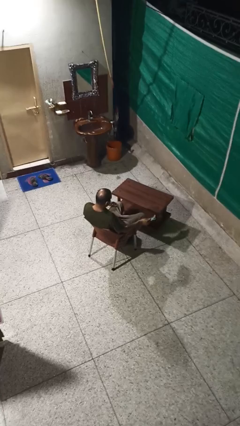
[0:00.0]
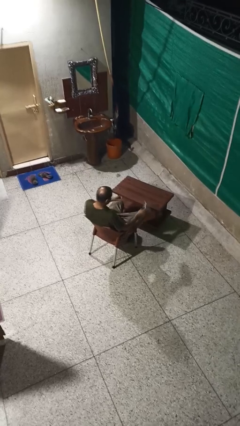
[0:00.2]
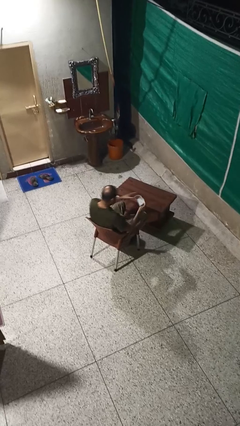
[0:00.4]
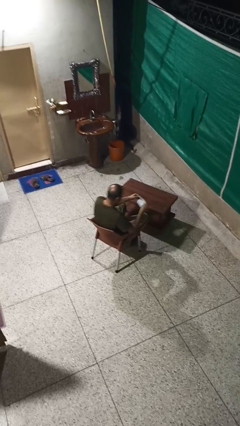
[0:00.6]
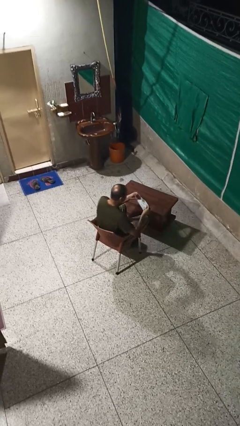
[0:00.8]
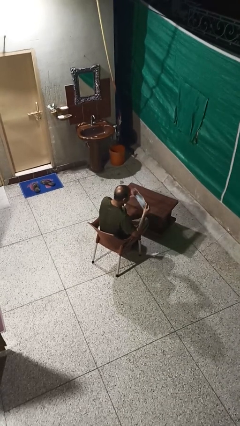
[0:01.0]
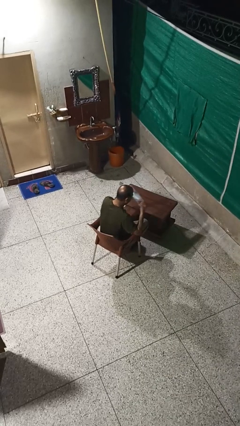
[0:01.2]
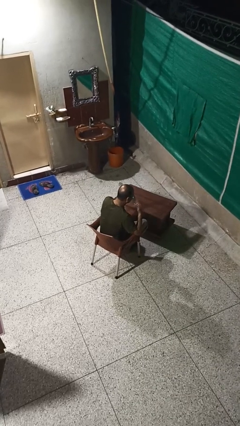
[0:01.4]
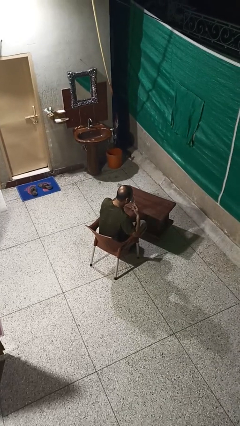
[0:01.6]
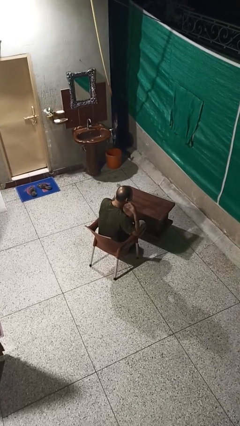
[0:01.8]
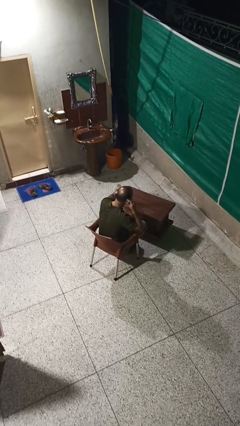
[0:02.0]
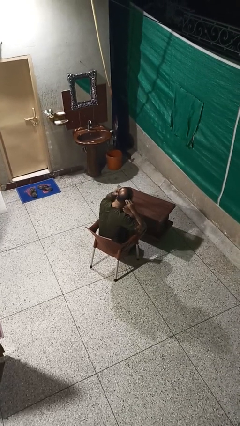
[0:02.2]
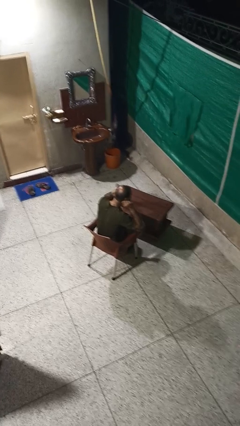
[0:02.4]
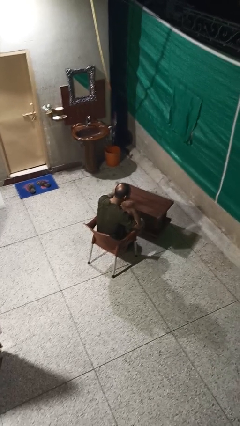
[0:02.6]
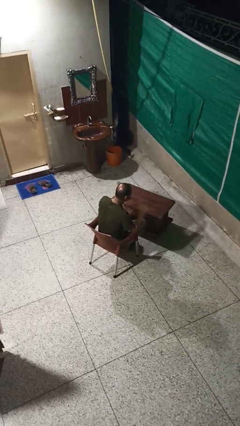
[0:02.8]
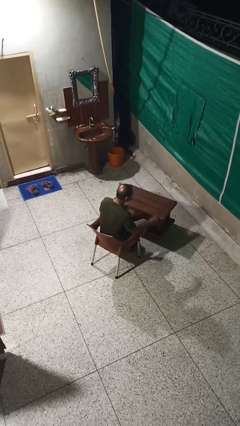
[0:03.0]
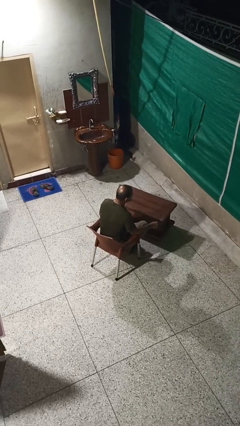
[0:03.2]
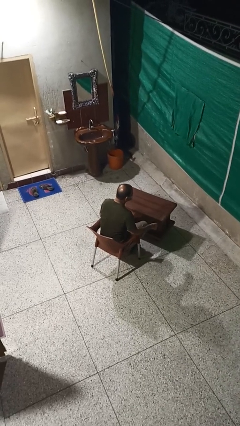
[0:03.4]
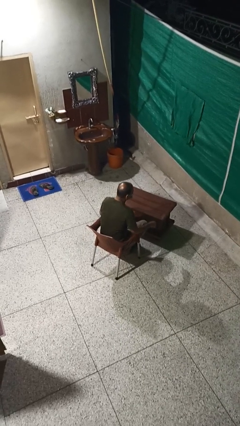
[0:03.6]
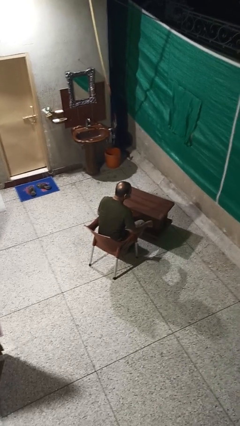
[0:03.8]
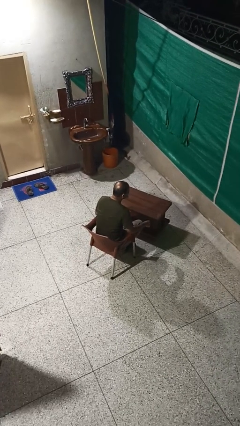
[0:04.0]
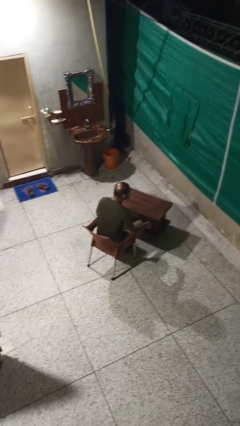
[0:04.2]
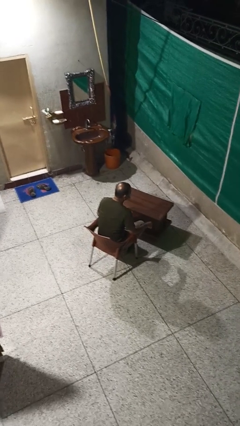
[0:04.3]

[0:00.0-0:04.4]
person puts on facemask

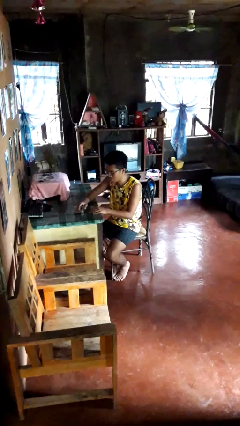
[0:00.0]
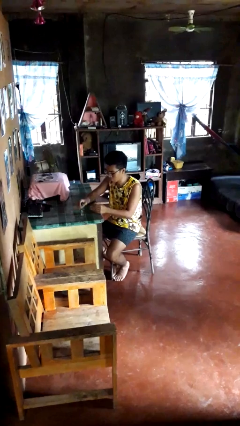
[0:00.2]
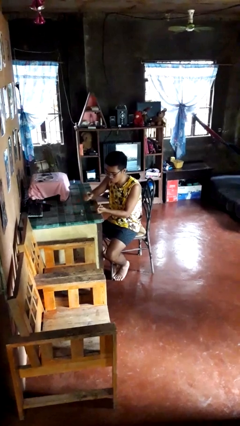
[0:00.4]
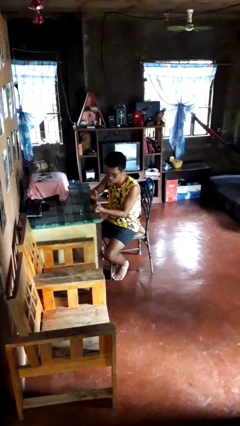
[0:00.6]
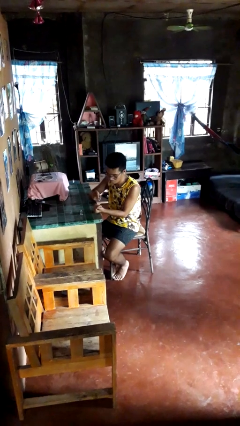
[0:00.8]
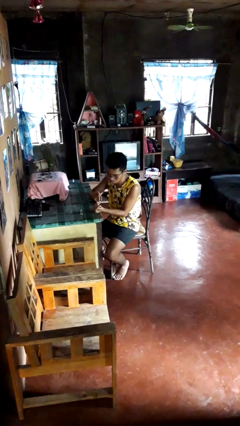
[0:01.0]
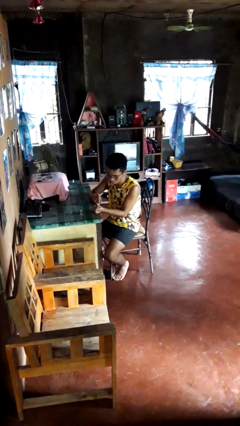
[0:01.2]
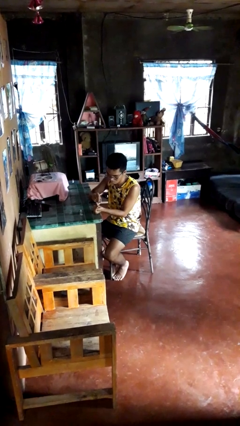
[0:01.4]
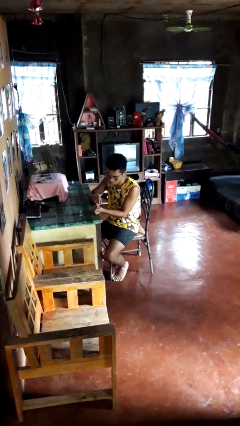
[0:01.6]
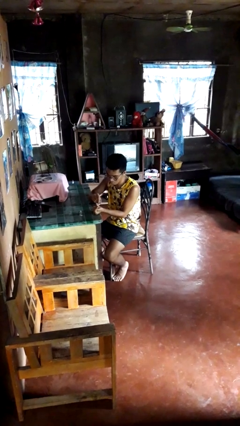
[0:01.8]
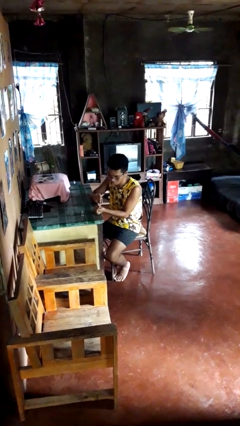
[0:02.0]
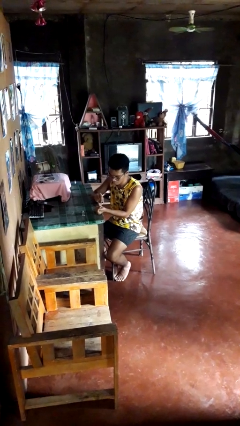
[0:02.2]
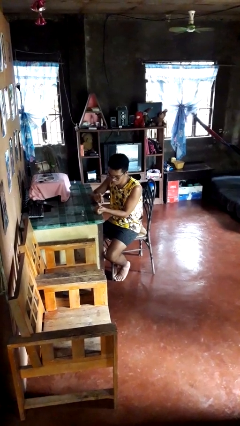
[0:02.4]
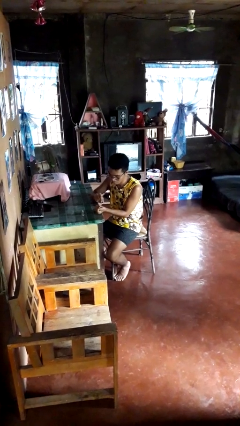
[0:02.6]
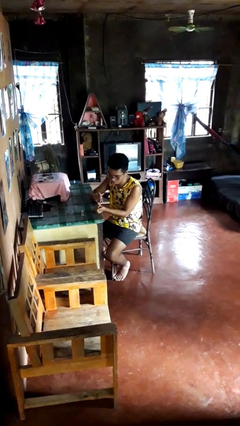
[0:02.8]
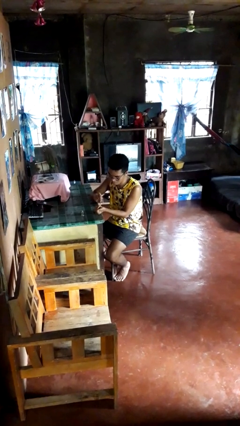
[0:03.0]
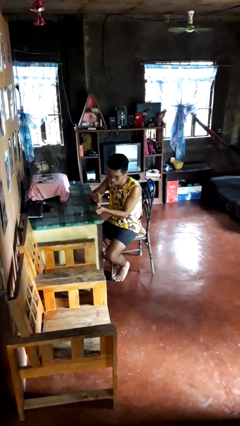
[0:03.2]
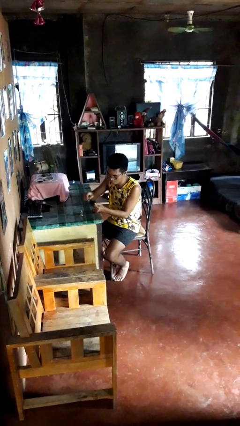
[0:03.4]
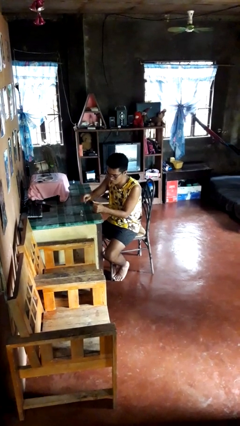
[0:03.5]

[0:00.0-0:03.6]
person paints fingernails

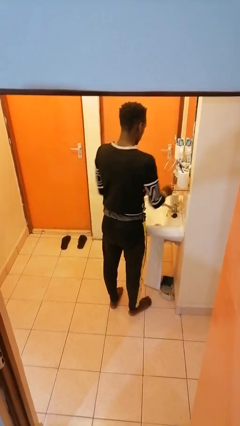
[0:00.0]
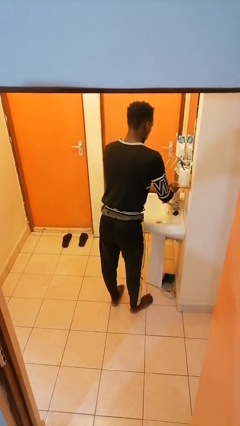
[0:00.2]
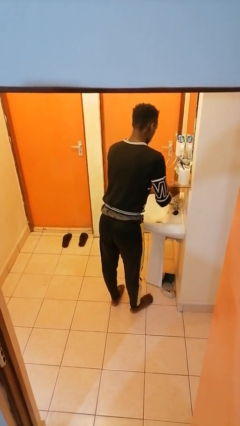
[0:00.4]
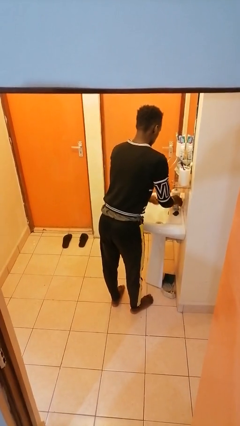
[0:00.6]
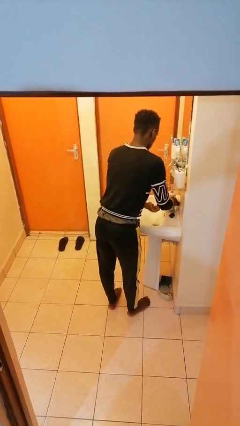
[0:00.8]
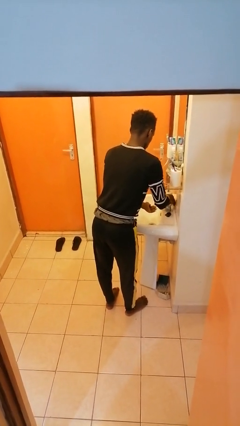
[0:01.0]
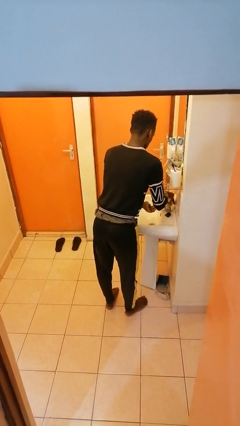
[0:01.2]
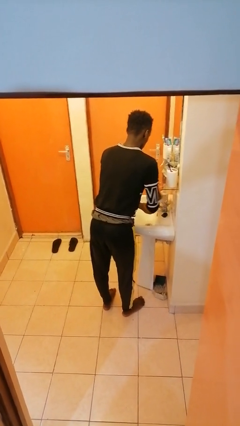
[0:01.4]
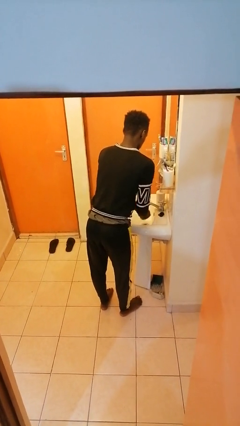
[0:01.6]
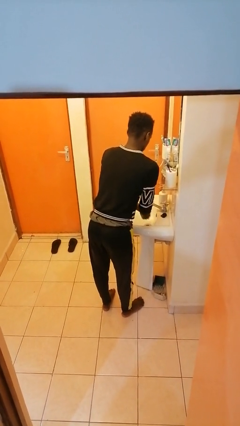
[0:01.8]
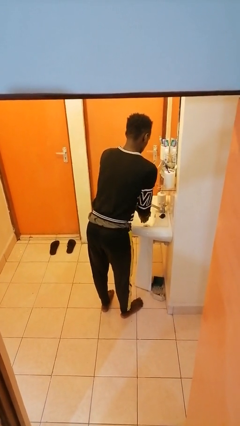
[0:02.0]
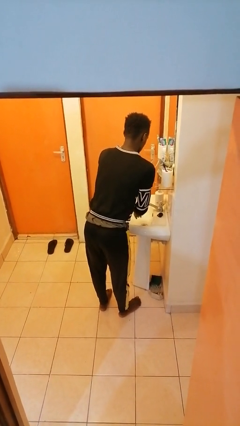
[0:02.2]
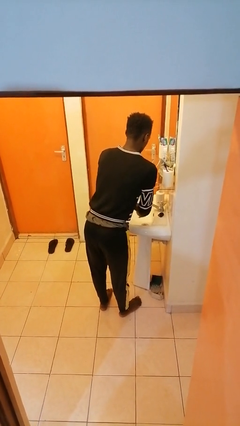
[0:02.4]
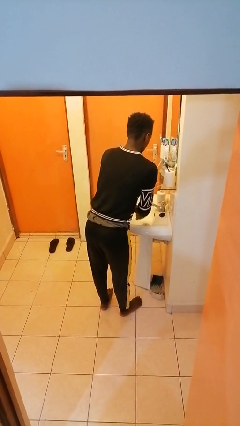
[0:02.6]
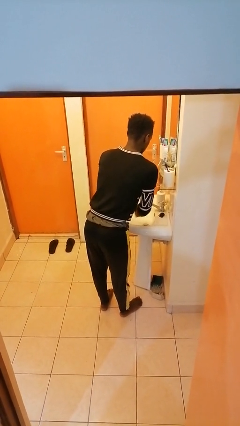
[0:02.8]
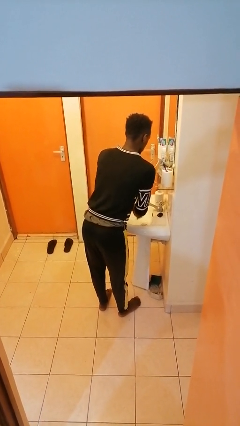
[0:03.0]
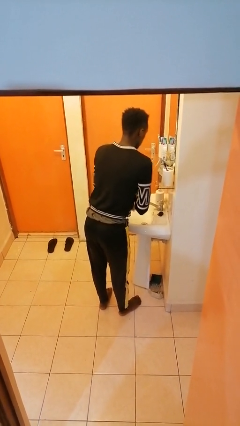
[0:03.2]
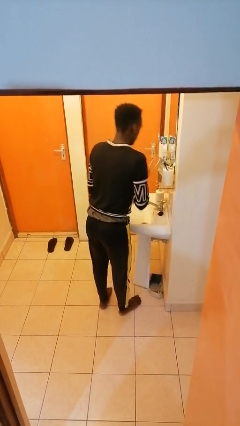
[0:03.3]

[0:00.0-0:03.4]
person washes hands

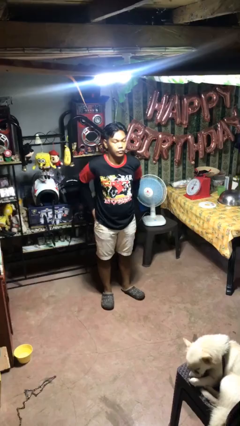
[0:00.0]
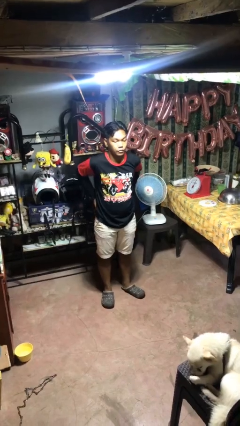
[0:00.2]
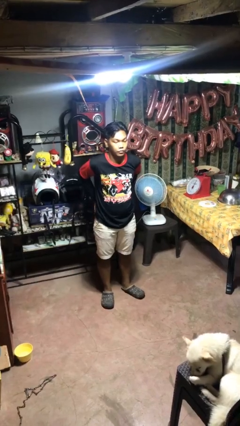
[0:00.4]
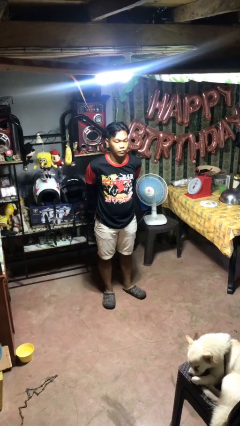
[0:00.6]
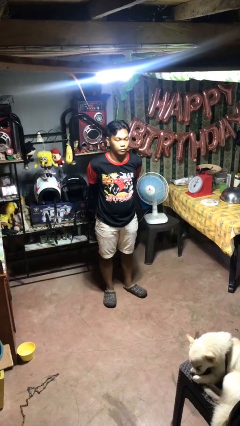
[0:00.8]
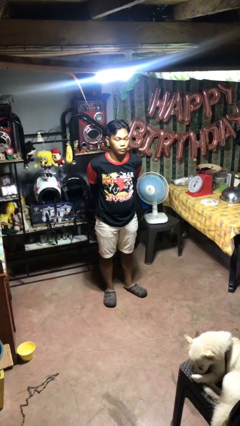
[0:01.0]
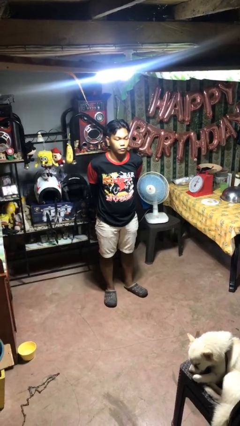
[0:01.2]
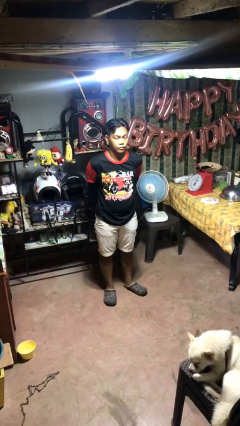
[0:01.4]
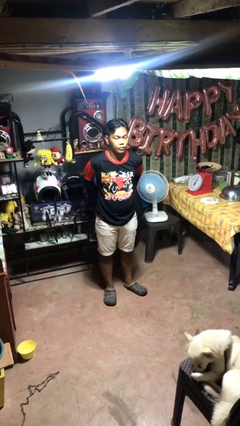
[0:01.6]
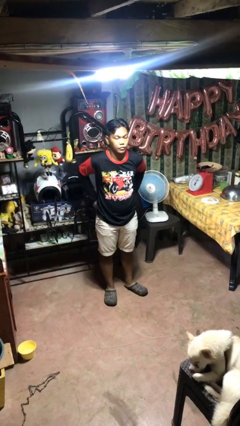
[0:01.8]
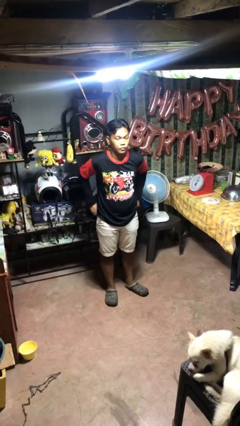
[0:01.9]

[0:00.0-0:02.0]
person puts hands in back pockets

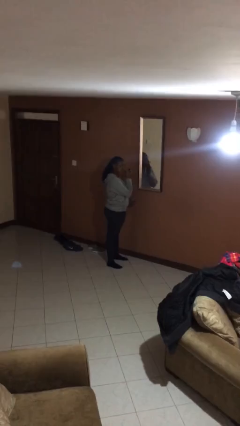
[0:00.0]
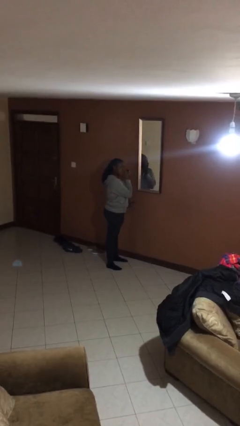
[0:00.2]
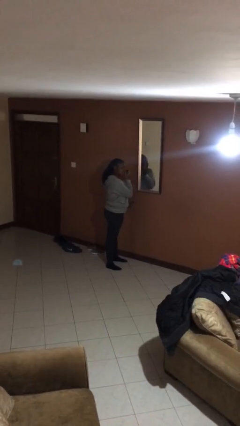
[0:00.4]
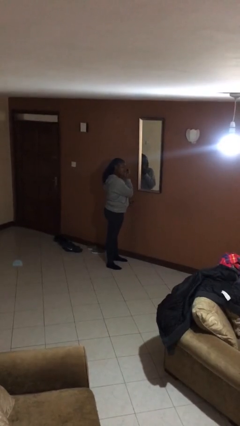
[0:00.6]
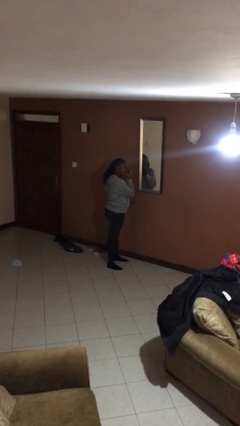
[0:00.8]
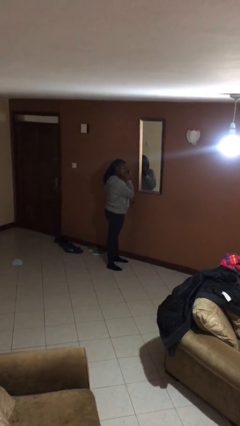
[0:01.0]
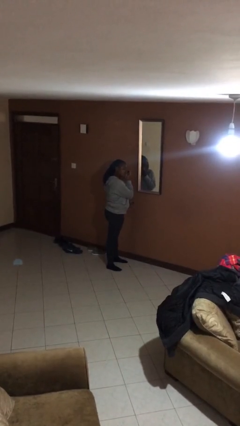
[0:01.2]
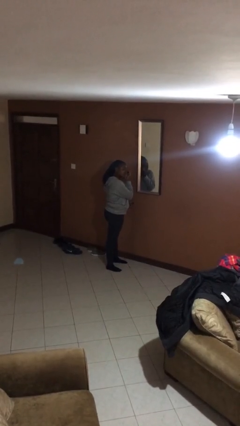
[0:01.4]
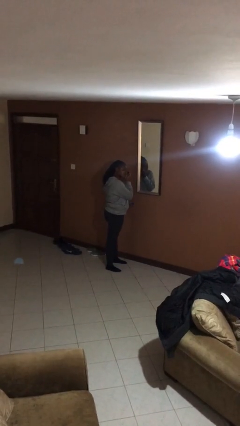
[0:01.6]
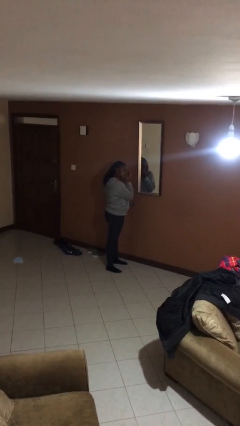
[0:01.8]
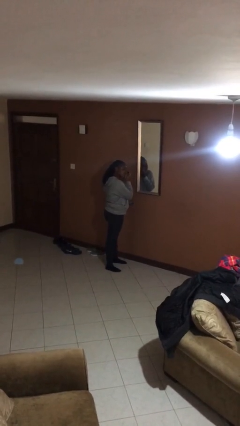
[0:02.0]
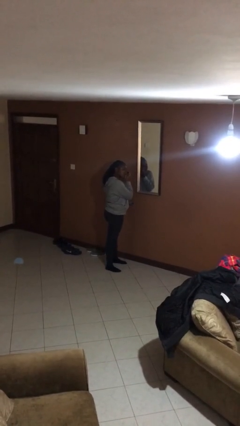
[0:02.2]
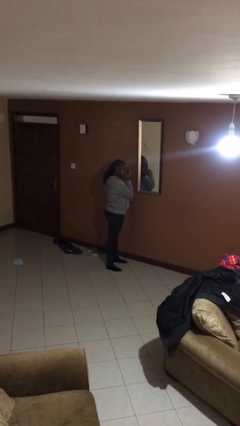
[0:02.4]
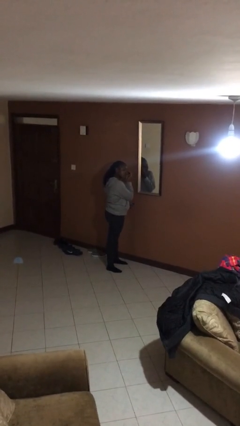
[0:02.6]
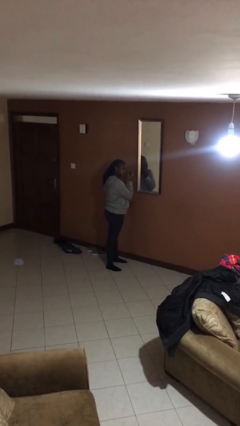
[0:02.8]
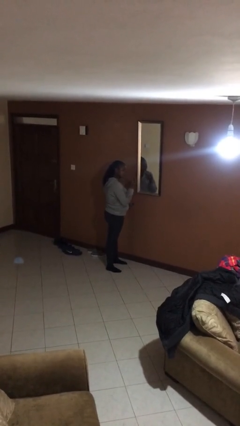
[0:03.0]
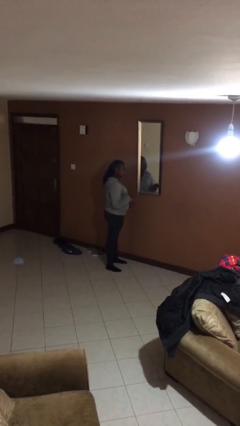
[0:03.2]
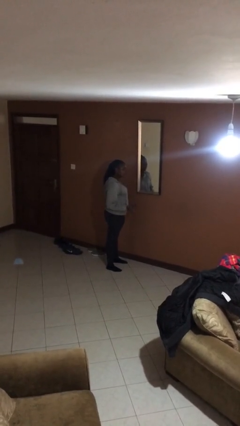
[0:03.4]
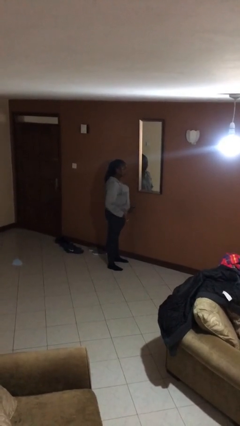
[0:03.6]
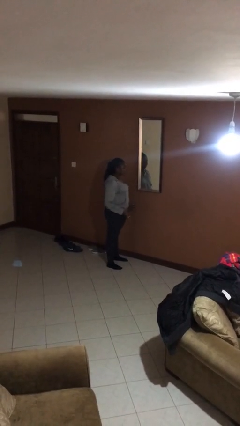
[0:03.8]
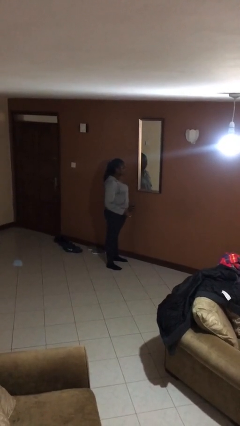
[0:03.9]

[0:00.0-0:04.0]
person applies eye makeup
